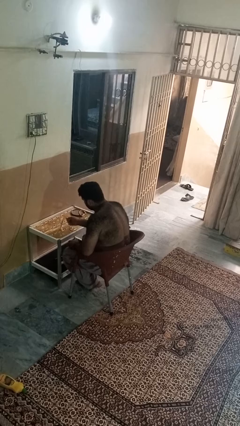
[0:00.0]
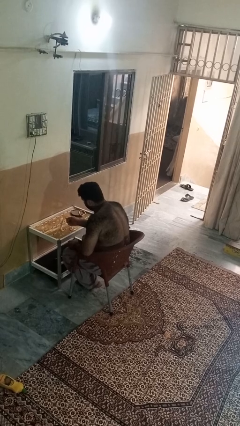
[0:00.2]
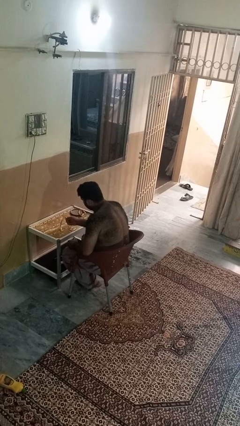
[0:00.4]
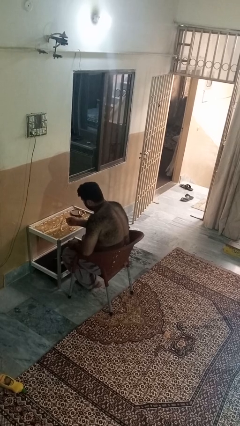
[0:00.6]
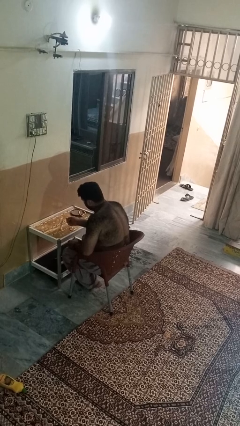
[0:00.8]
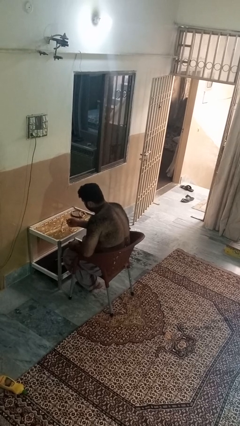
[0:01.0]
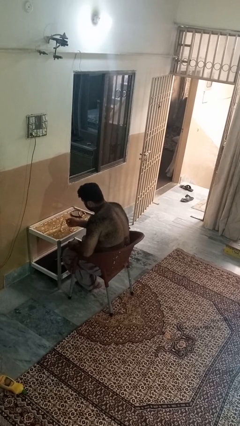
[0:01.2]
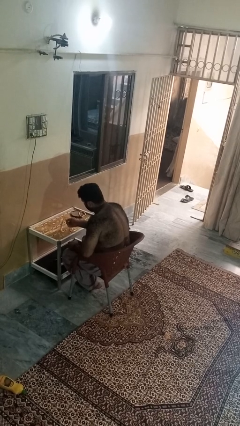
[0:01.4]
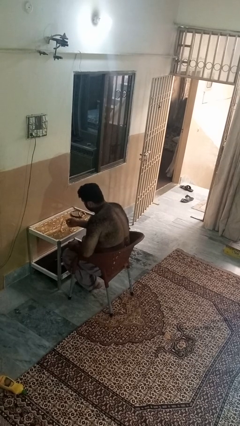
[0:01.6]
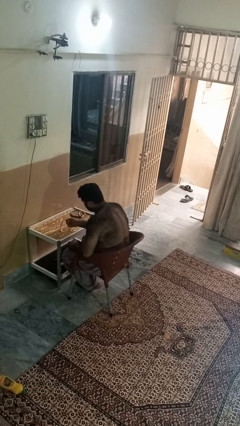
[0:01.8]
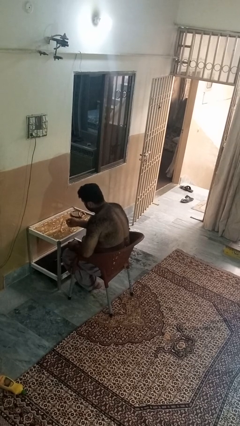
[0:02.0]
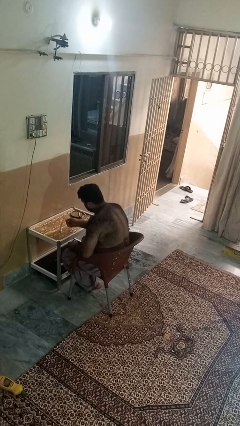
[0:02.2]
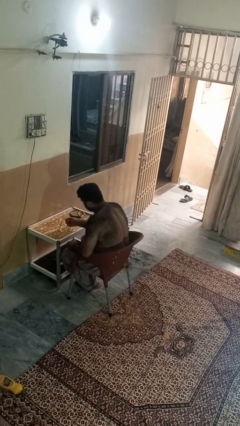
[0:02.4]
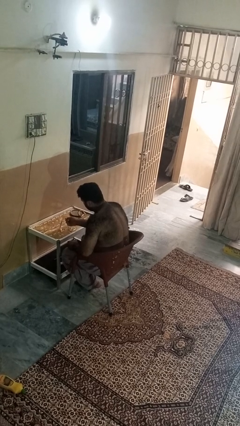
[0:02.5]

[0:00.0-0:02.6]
person shakes head

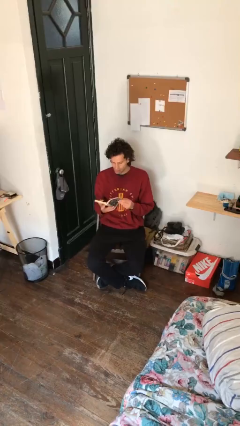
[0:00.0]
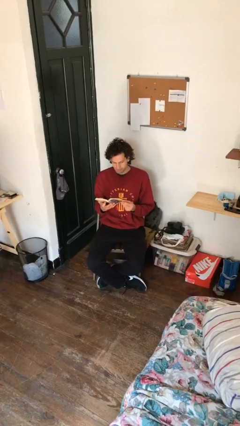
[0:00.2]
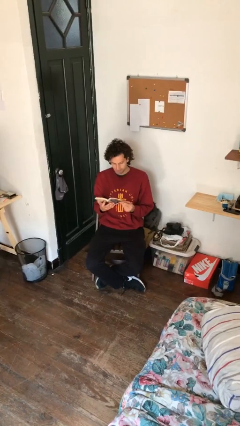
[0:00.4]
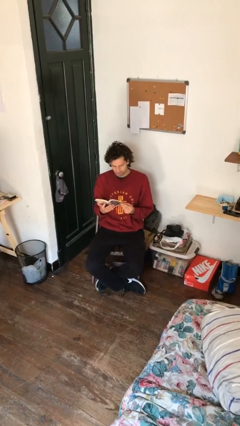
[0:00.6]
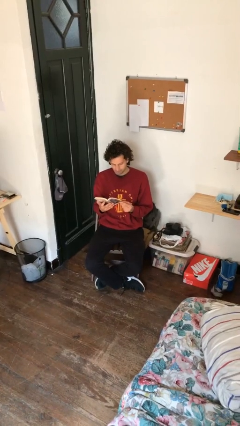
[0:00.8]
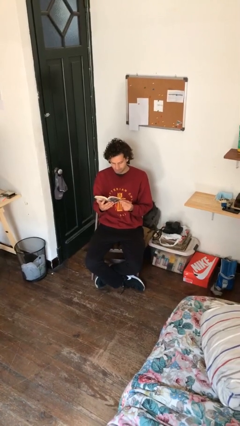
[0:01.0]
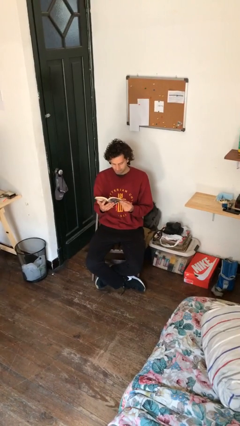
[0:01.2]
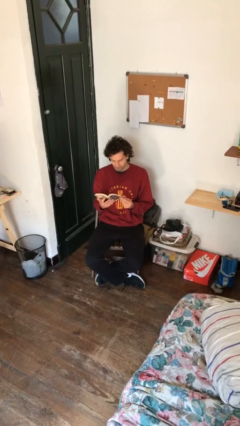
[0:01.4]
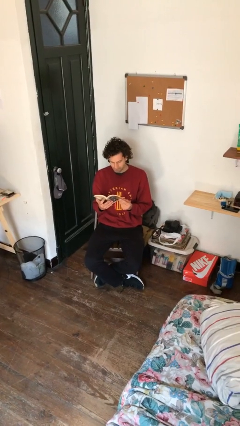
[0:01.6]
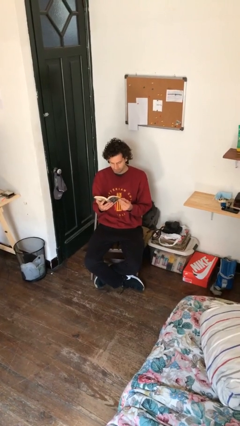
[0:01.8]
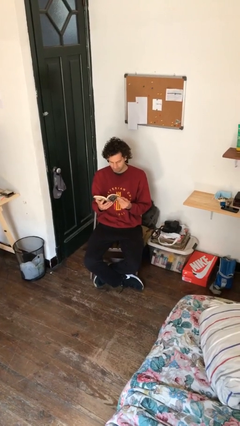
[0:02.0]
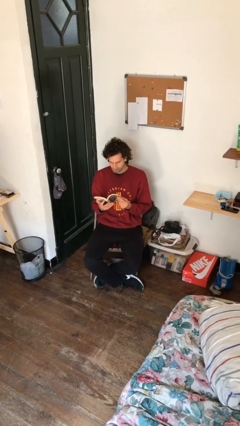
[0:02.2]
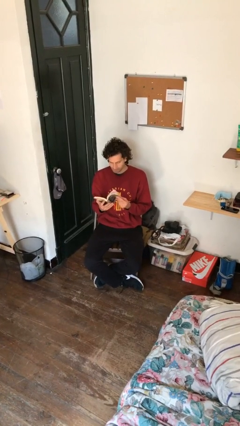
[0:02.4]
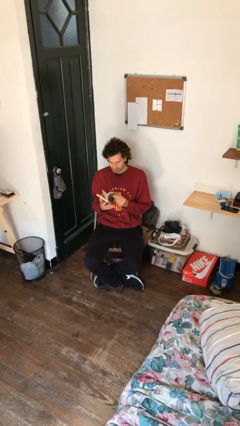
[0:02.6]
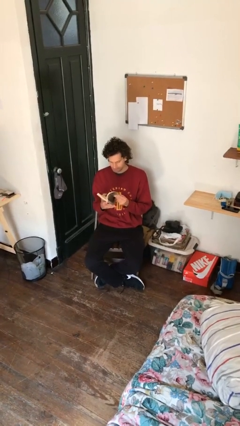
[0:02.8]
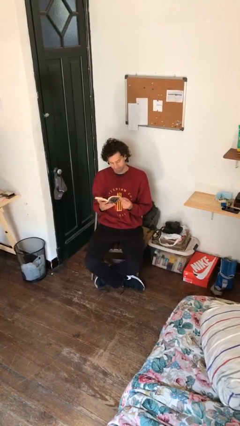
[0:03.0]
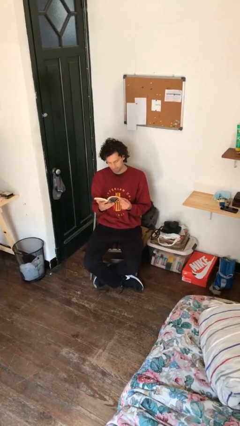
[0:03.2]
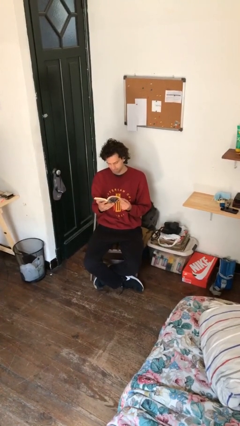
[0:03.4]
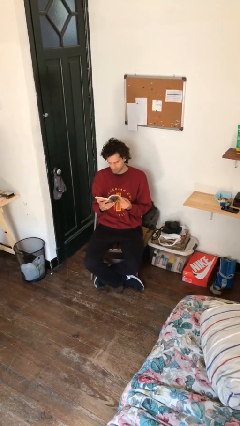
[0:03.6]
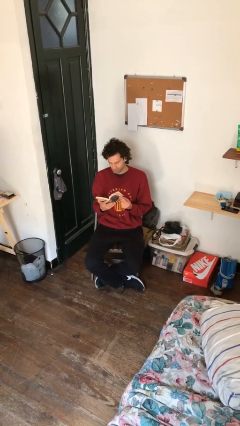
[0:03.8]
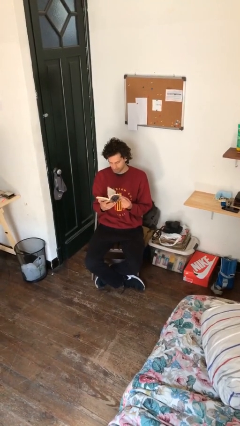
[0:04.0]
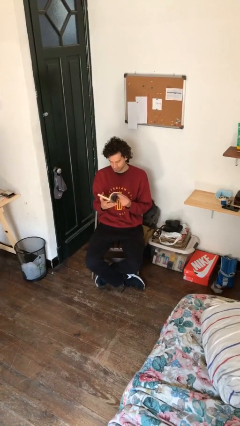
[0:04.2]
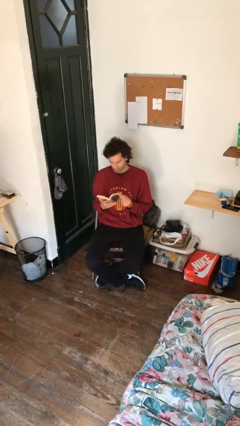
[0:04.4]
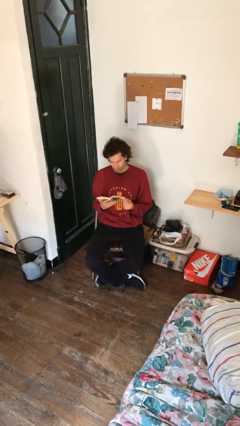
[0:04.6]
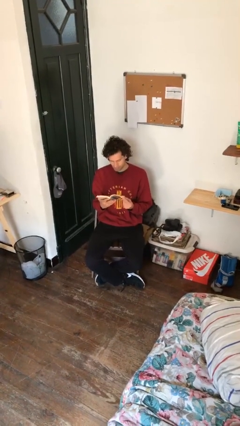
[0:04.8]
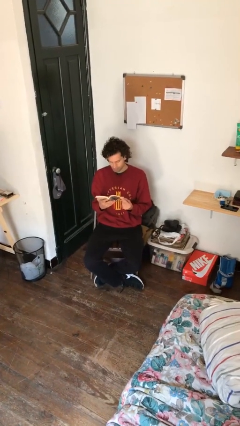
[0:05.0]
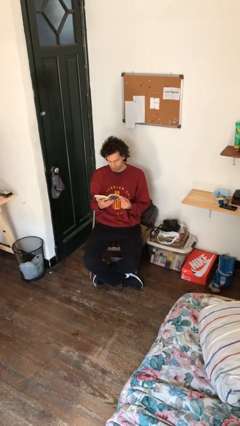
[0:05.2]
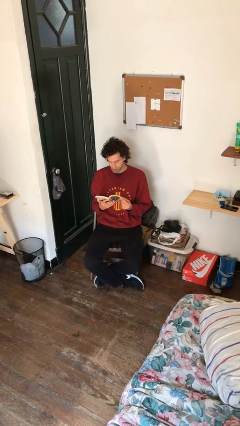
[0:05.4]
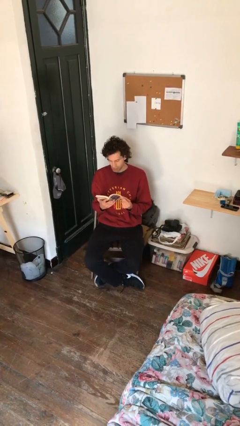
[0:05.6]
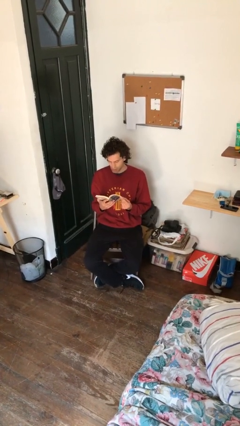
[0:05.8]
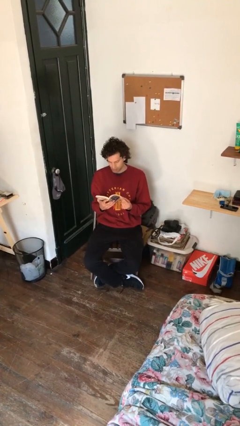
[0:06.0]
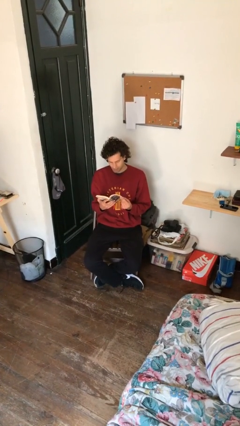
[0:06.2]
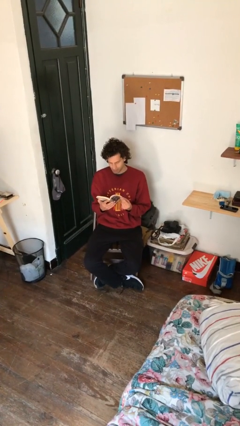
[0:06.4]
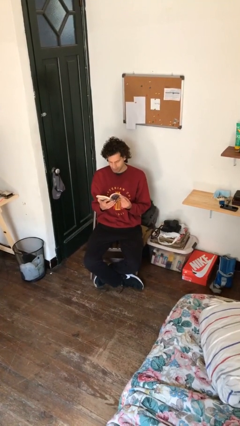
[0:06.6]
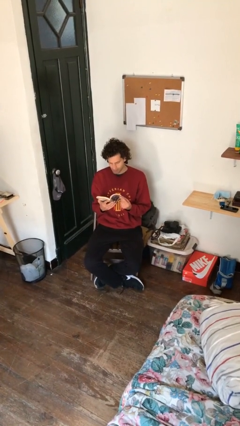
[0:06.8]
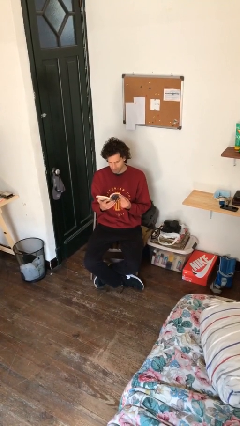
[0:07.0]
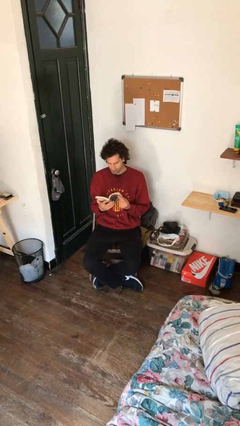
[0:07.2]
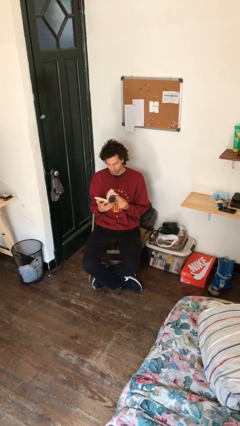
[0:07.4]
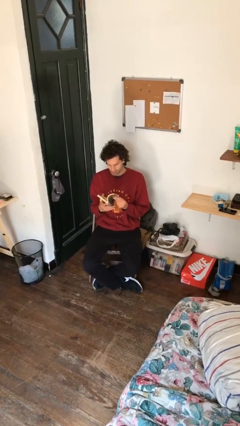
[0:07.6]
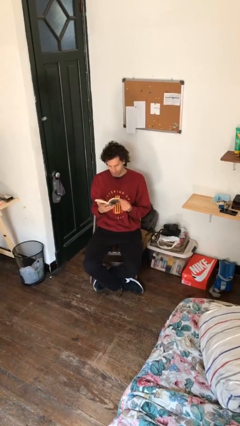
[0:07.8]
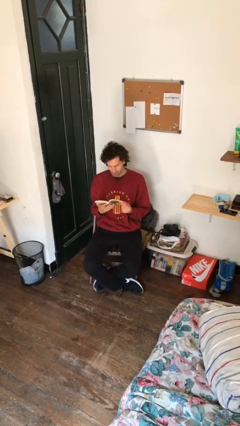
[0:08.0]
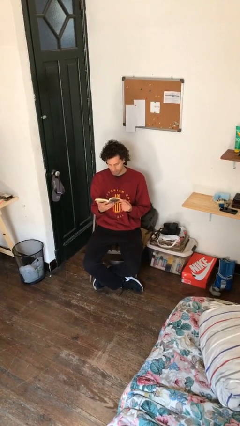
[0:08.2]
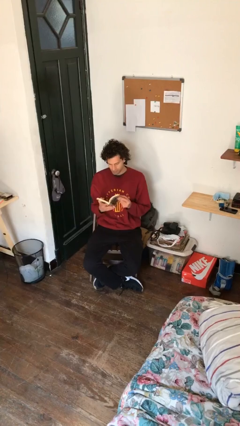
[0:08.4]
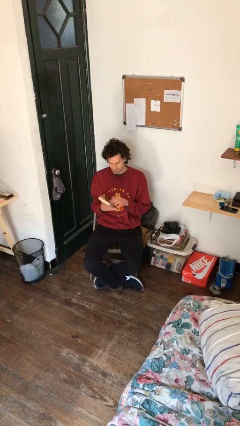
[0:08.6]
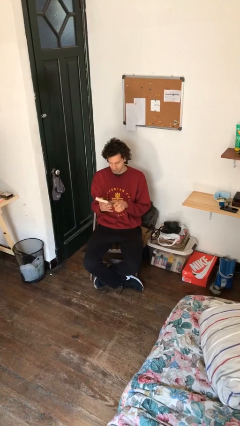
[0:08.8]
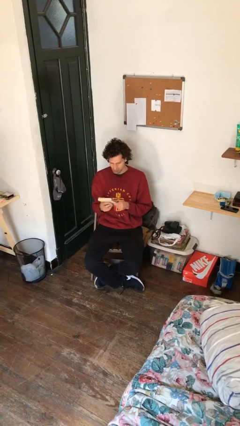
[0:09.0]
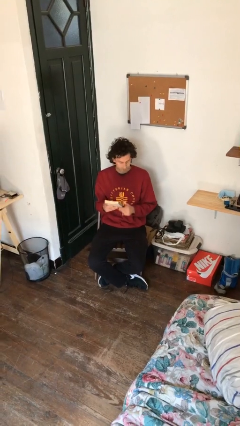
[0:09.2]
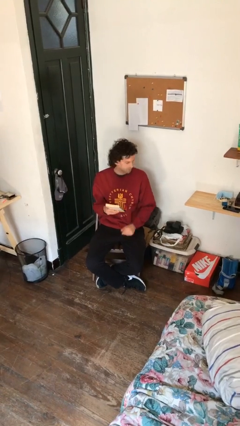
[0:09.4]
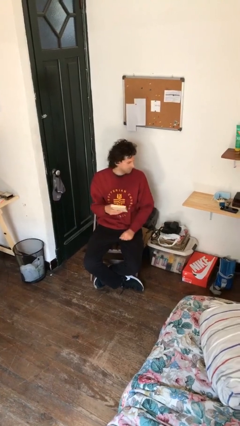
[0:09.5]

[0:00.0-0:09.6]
person reads document

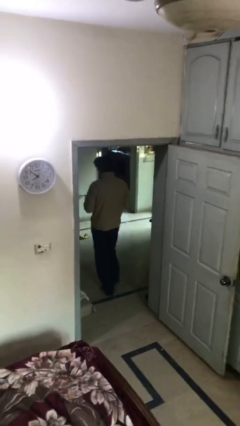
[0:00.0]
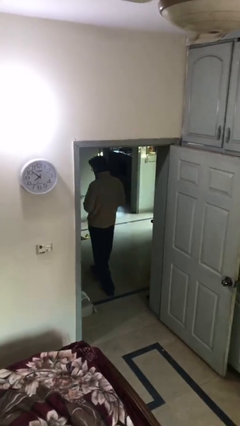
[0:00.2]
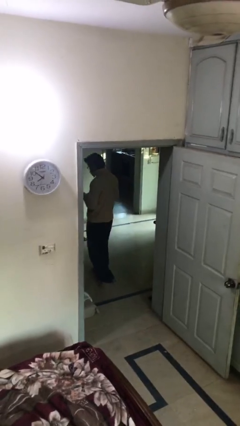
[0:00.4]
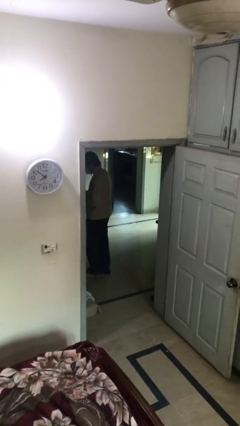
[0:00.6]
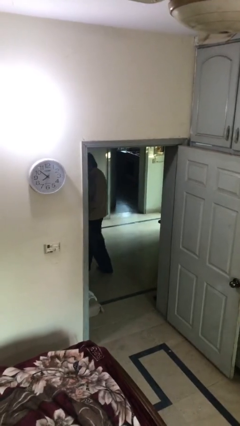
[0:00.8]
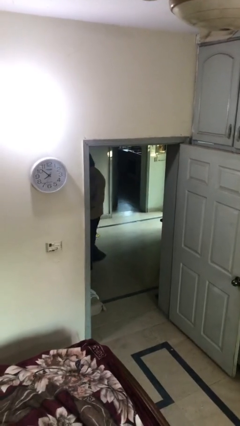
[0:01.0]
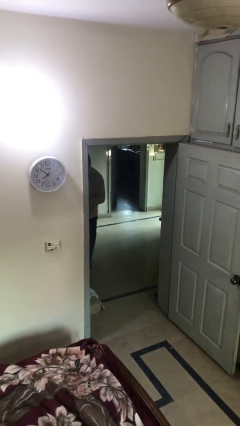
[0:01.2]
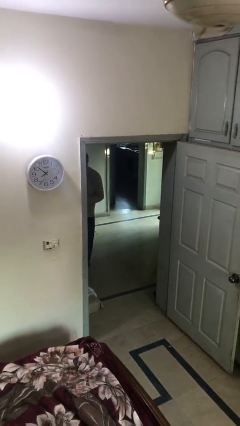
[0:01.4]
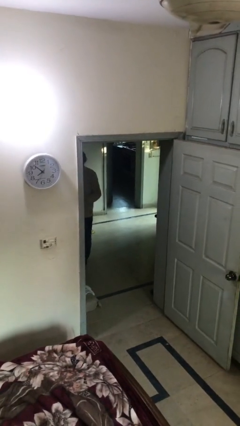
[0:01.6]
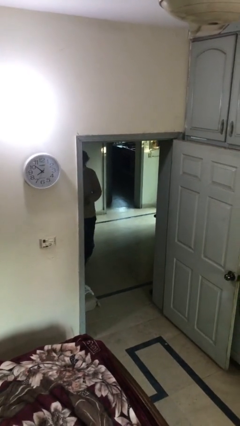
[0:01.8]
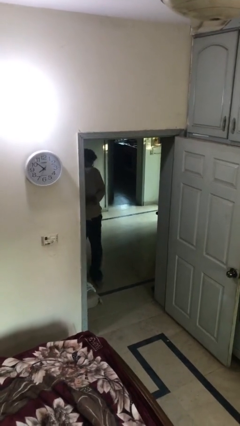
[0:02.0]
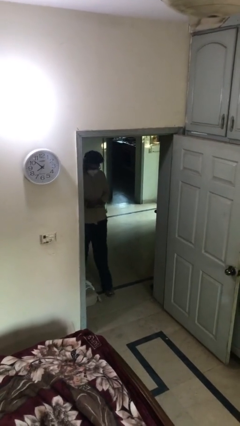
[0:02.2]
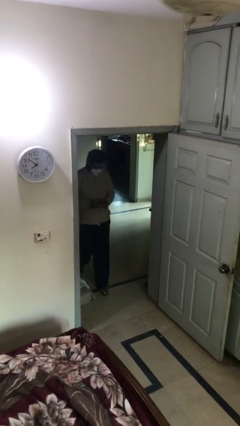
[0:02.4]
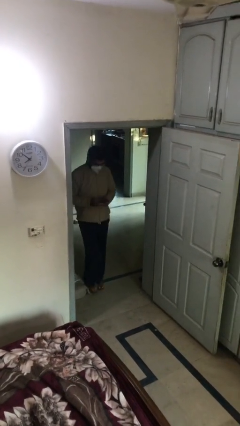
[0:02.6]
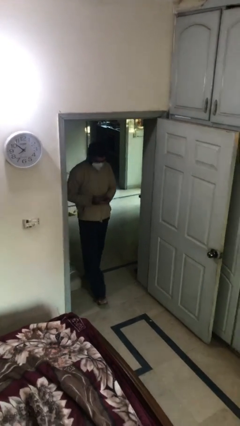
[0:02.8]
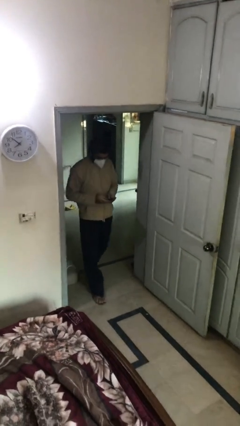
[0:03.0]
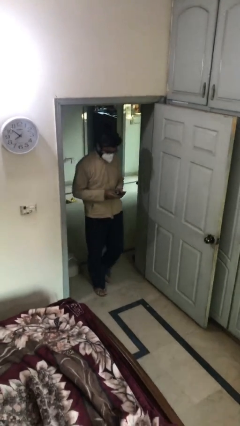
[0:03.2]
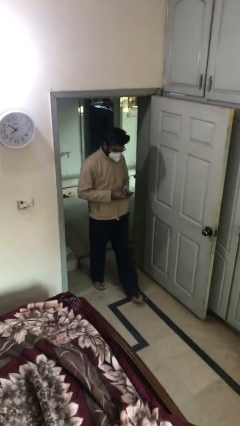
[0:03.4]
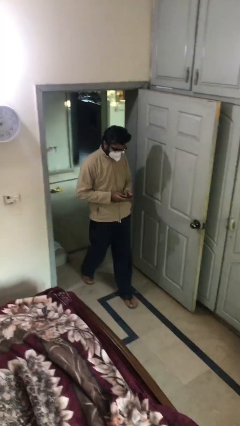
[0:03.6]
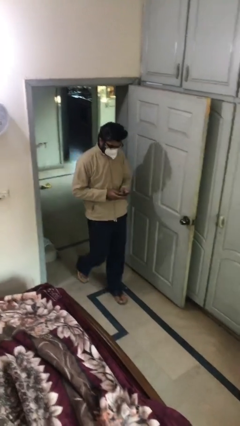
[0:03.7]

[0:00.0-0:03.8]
person enters scene through structure

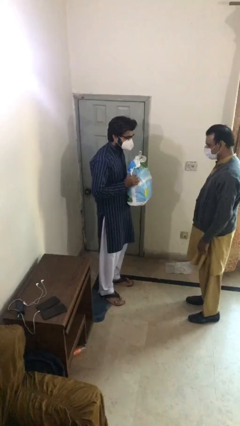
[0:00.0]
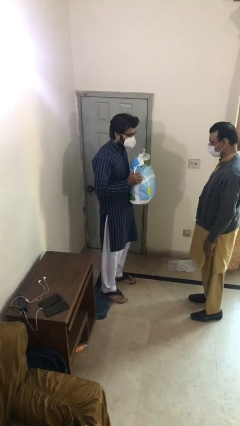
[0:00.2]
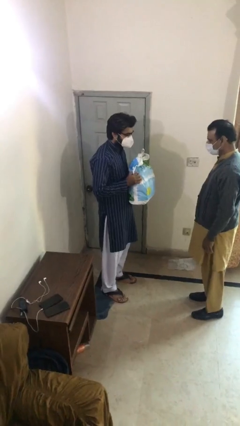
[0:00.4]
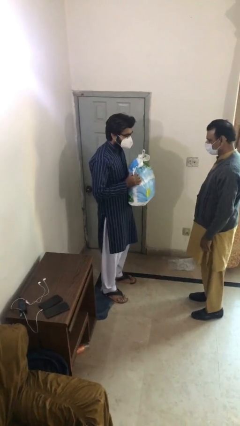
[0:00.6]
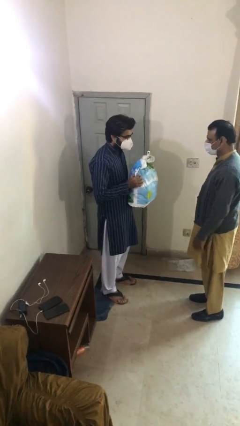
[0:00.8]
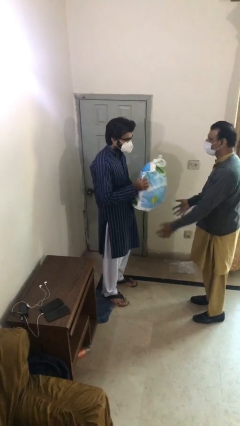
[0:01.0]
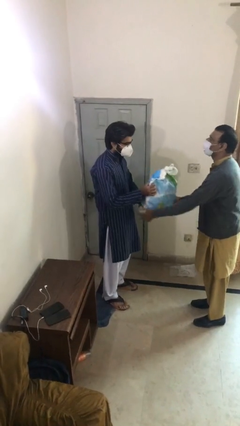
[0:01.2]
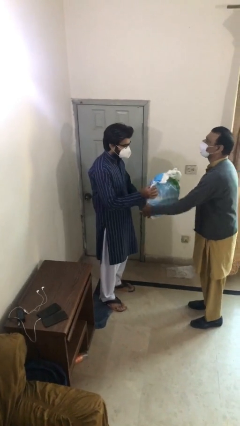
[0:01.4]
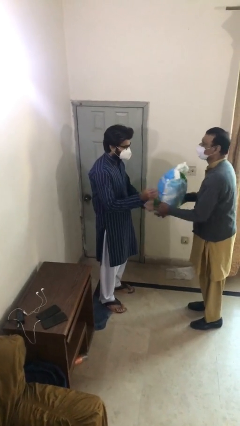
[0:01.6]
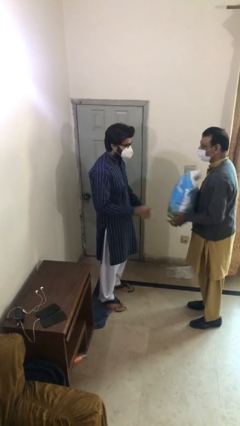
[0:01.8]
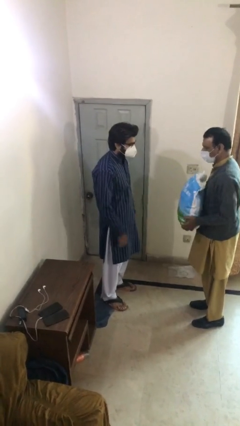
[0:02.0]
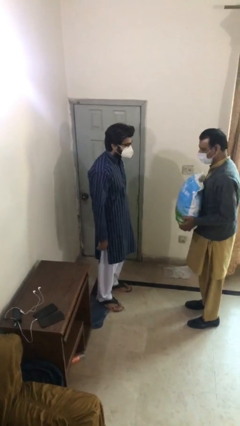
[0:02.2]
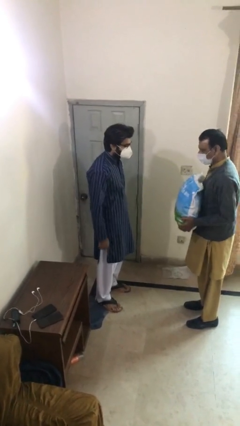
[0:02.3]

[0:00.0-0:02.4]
person transfers object to person
